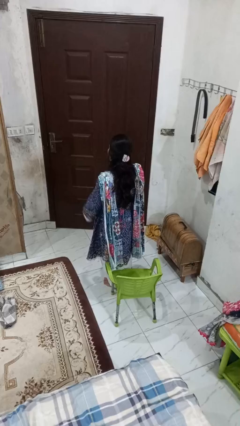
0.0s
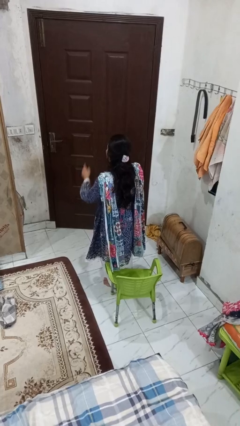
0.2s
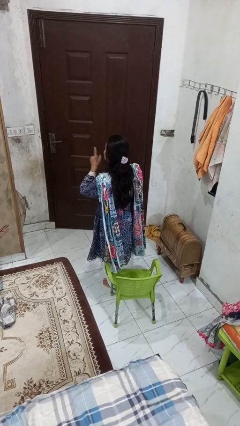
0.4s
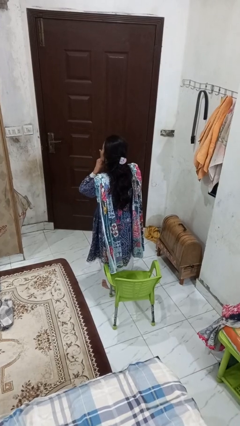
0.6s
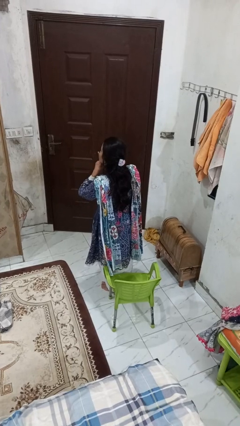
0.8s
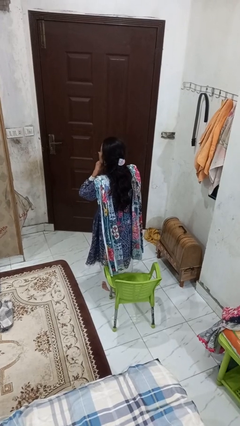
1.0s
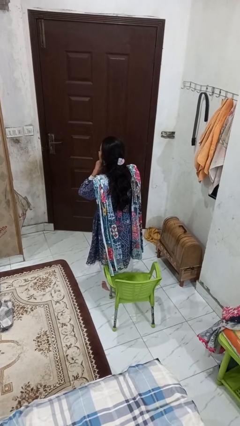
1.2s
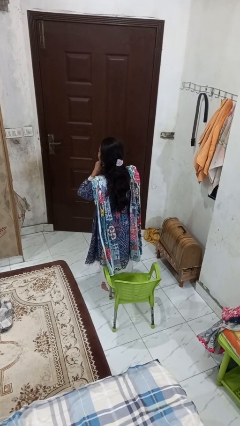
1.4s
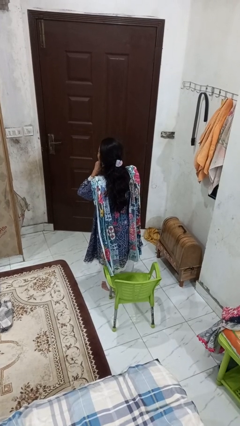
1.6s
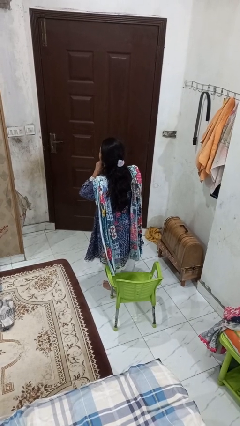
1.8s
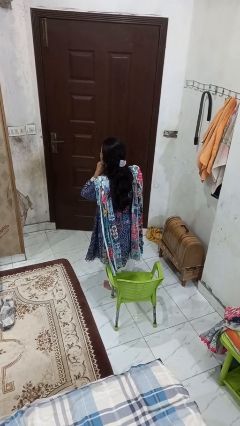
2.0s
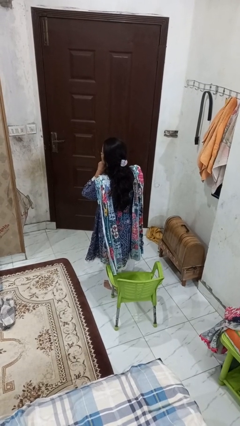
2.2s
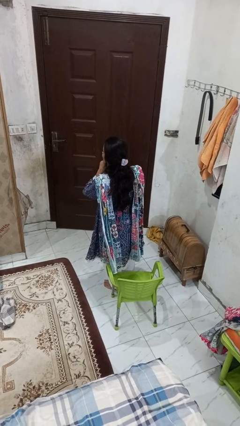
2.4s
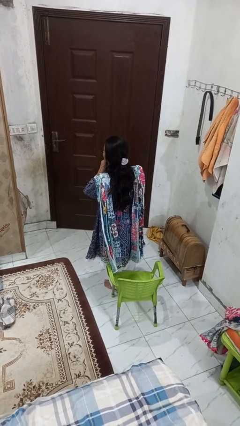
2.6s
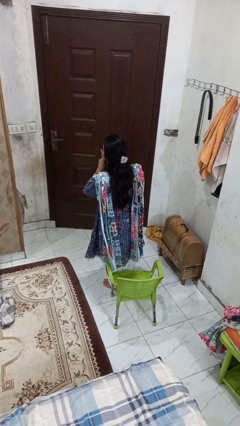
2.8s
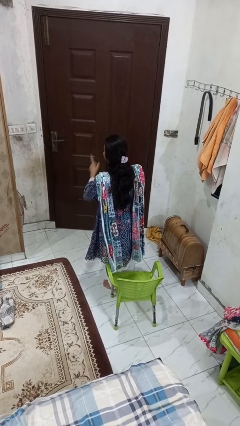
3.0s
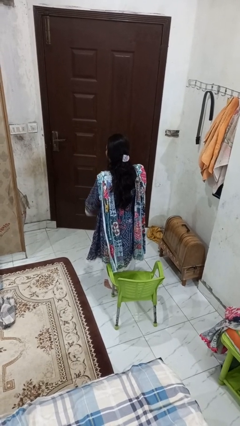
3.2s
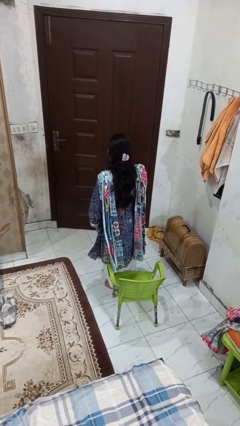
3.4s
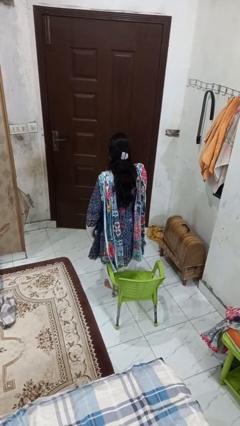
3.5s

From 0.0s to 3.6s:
person gestures be quiet

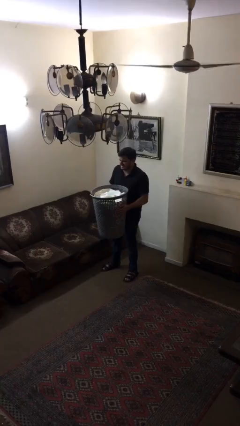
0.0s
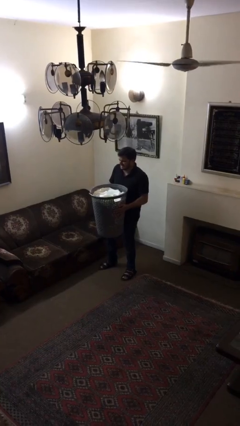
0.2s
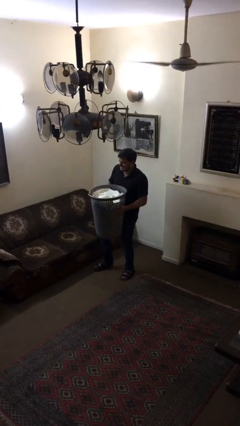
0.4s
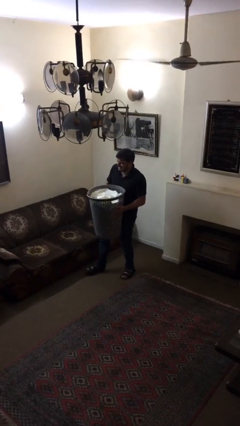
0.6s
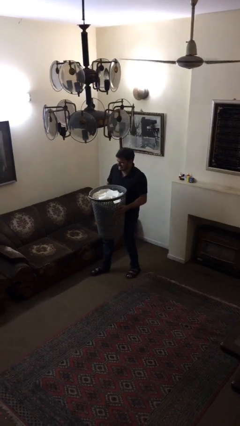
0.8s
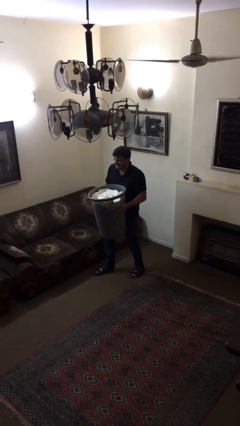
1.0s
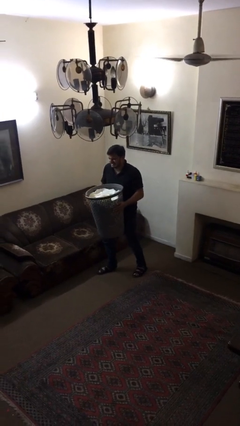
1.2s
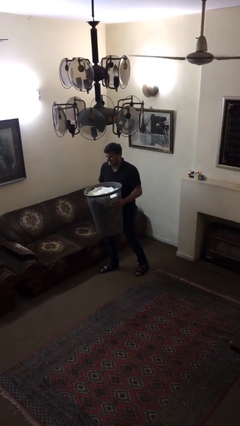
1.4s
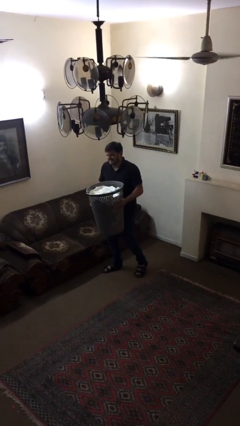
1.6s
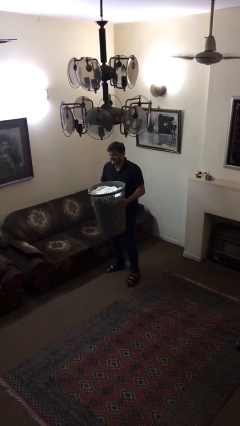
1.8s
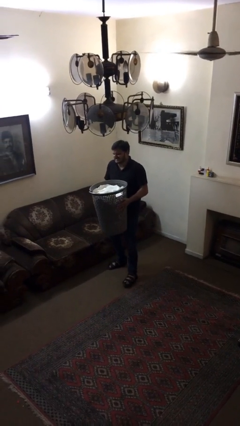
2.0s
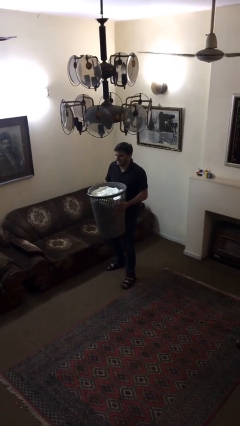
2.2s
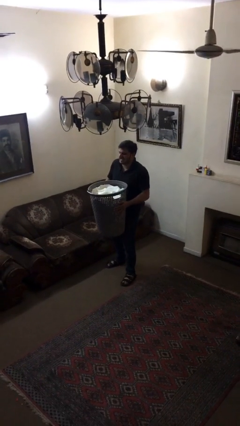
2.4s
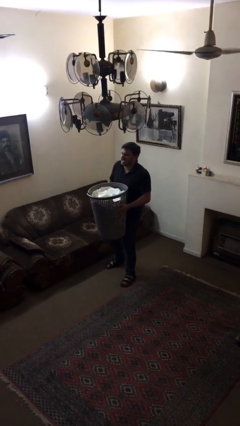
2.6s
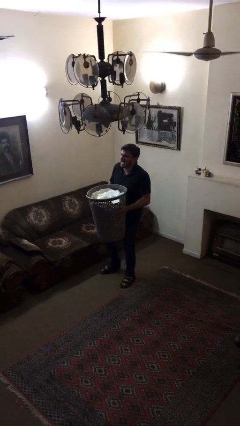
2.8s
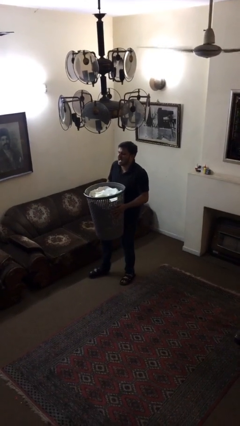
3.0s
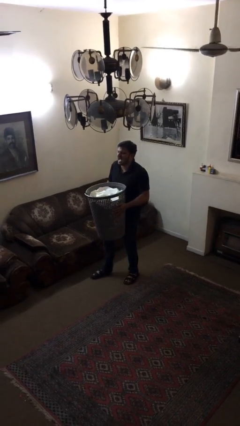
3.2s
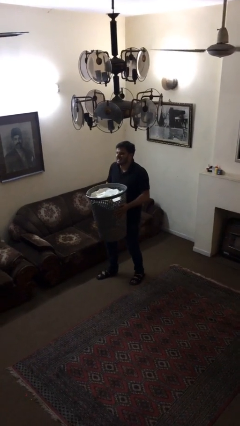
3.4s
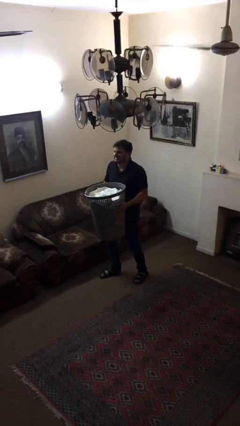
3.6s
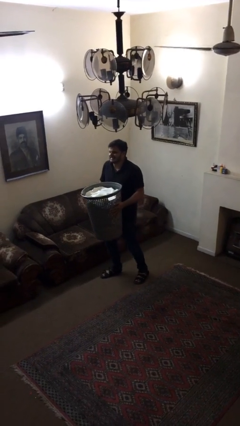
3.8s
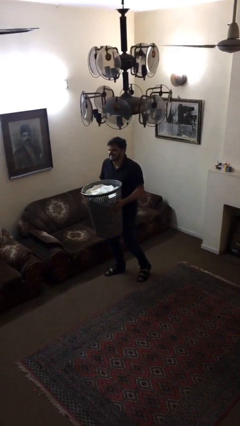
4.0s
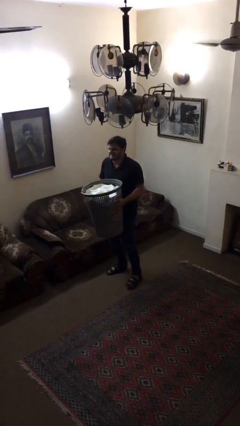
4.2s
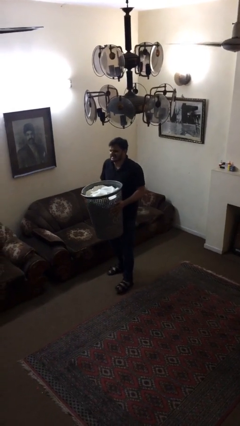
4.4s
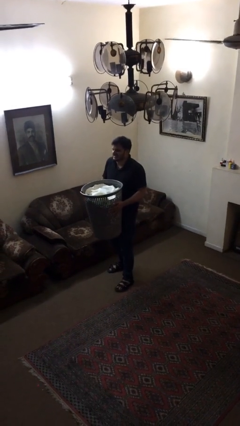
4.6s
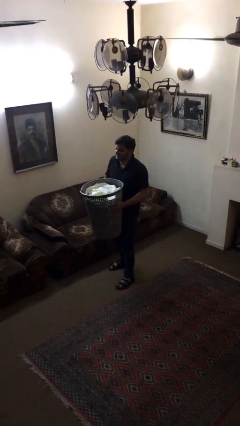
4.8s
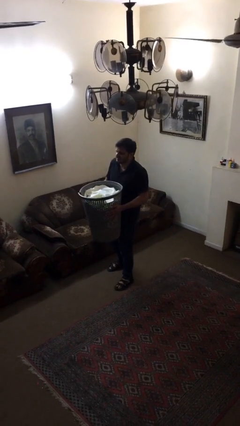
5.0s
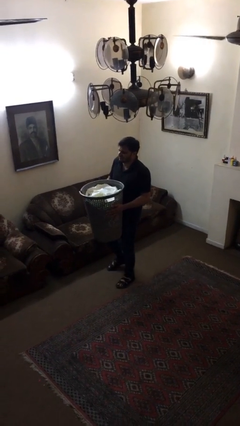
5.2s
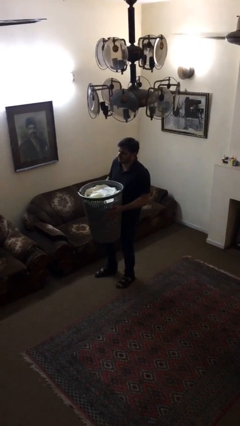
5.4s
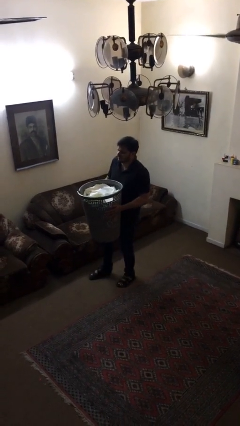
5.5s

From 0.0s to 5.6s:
person carries heavy object

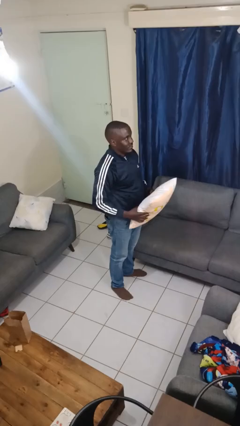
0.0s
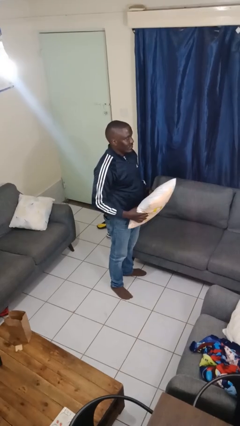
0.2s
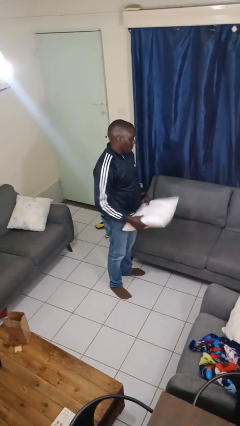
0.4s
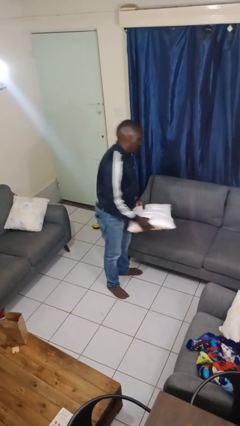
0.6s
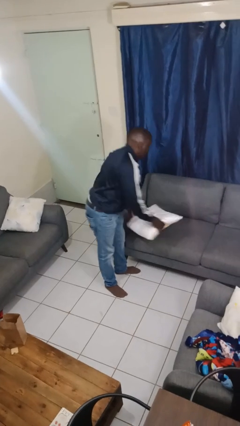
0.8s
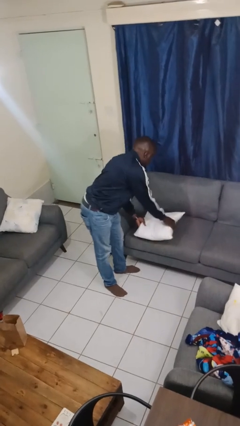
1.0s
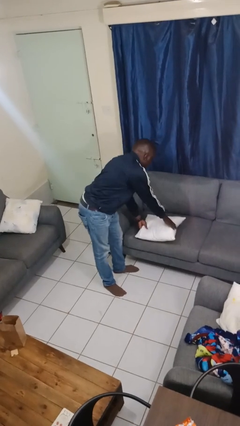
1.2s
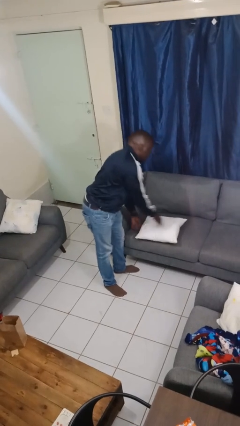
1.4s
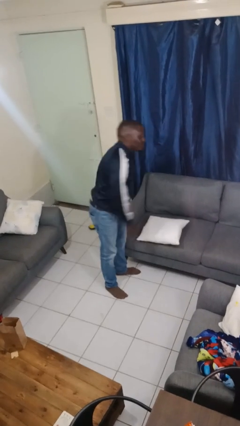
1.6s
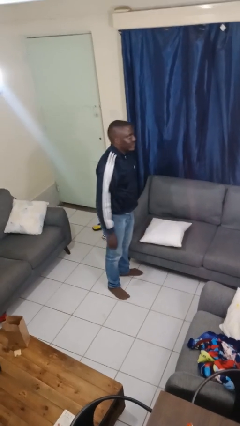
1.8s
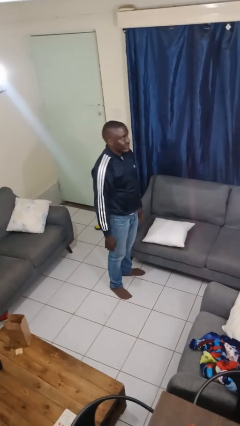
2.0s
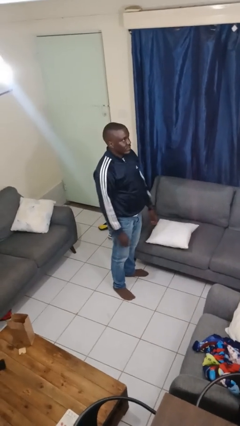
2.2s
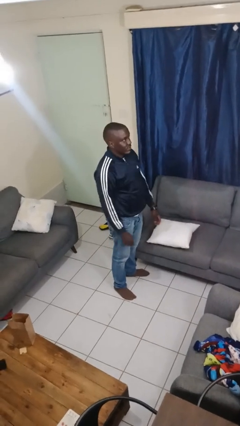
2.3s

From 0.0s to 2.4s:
person puts down object on couch

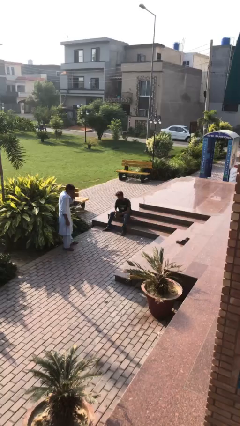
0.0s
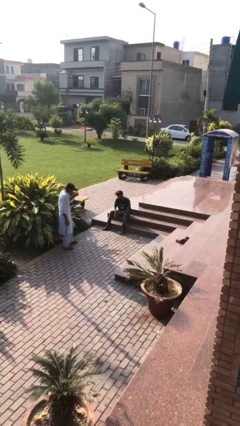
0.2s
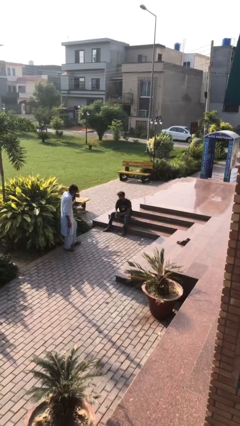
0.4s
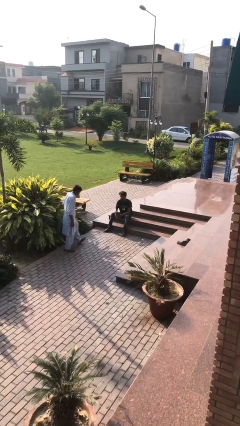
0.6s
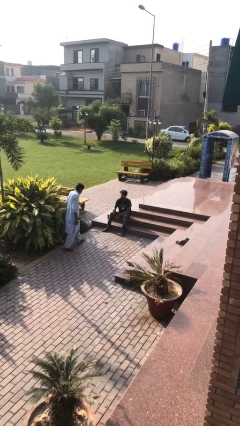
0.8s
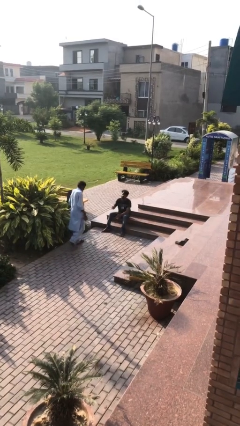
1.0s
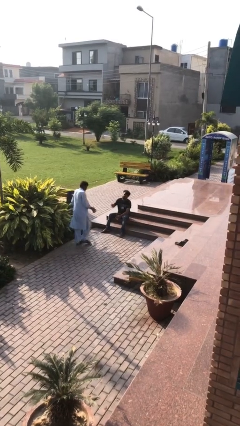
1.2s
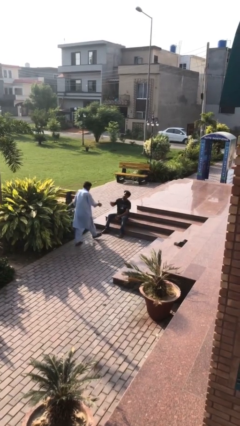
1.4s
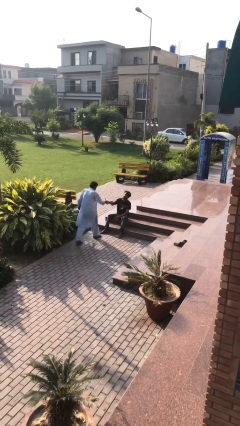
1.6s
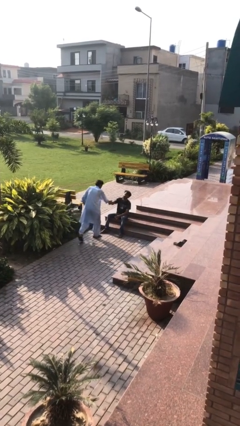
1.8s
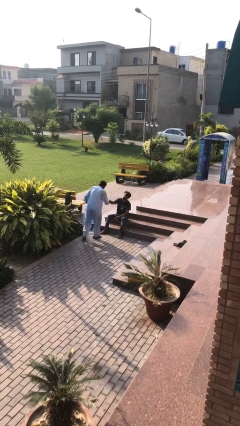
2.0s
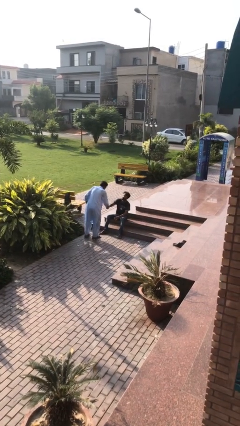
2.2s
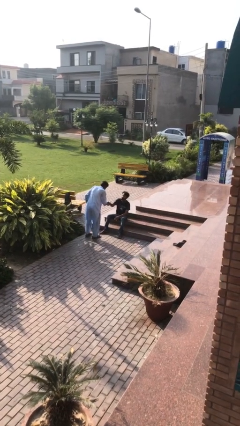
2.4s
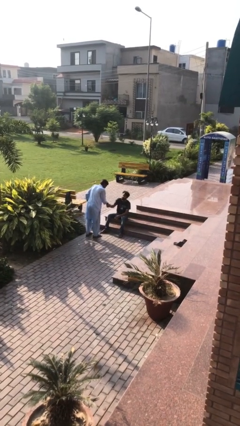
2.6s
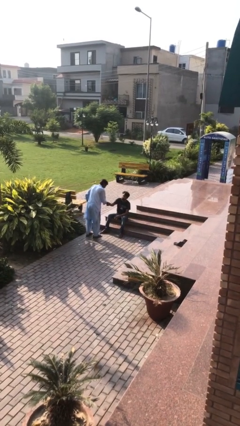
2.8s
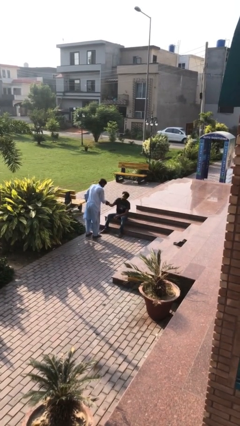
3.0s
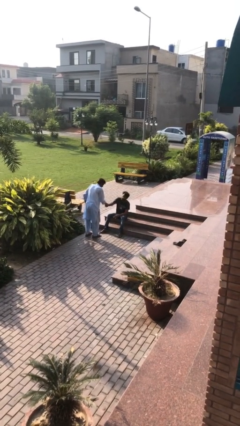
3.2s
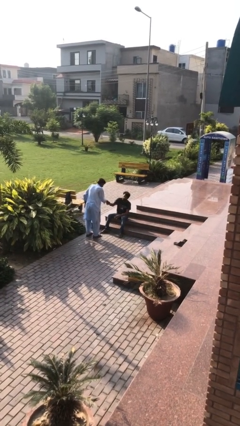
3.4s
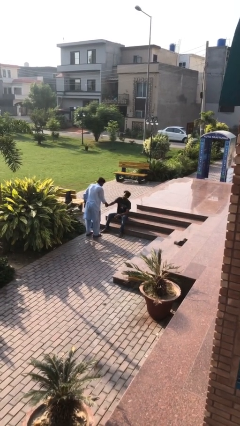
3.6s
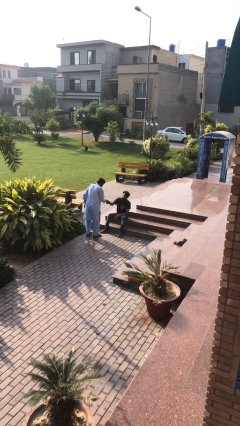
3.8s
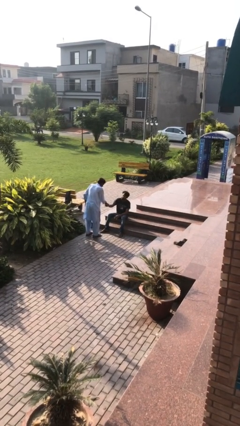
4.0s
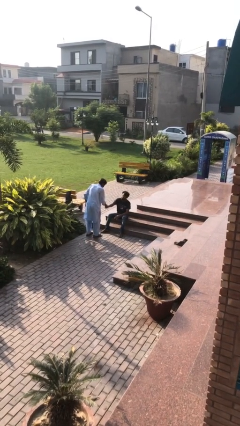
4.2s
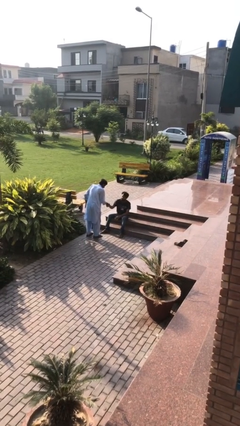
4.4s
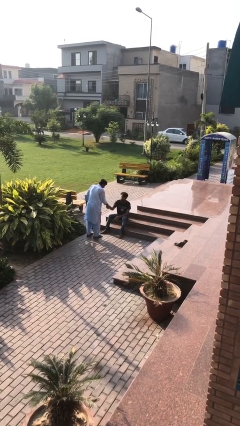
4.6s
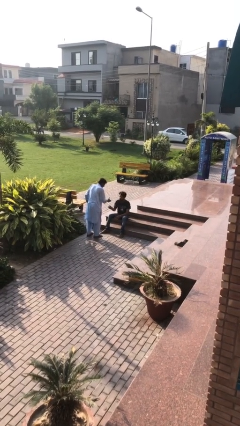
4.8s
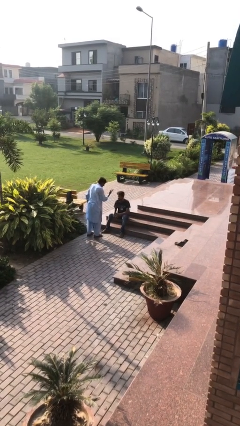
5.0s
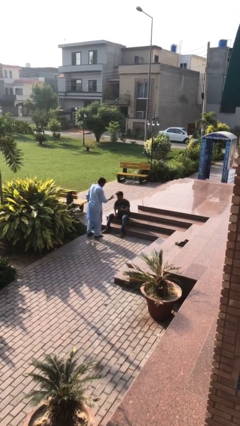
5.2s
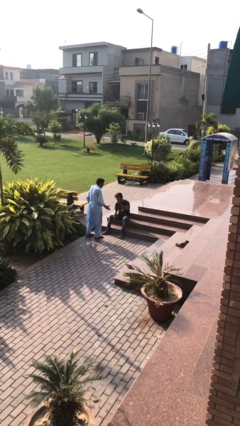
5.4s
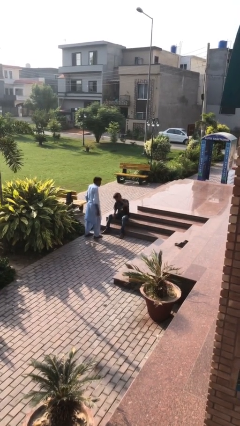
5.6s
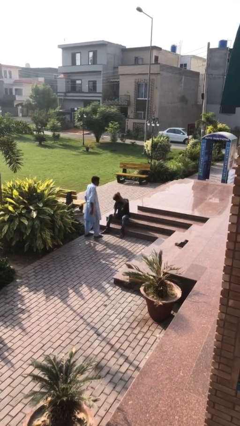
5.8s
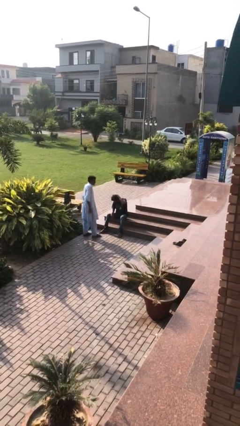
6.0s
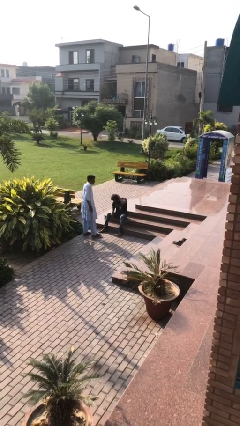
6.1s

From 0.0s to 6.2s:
person shakes hand
